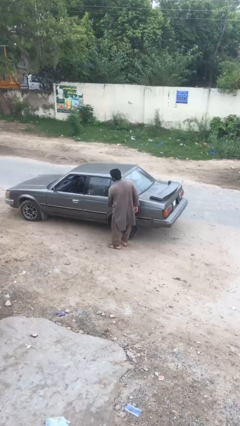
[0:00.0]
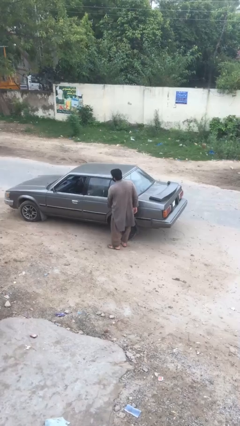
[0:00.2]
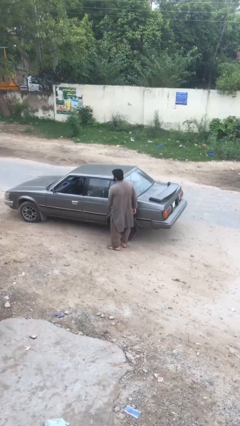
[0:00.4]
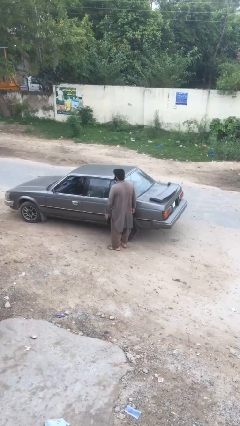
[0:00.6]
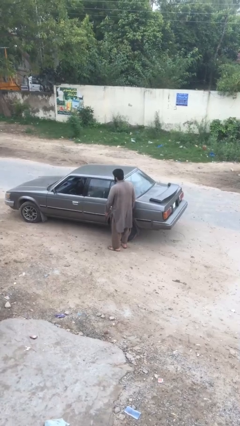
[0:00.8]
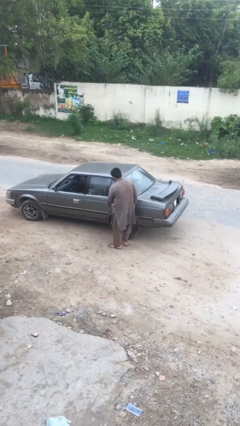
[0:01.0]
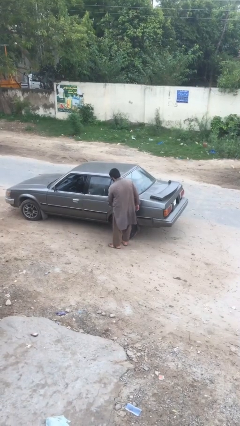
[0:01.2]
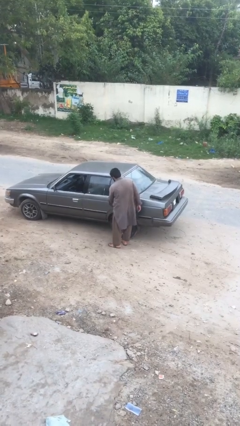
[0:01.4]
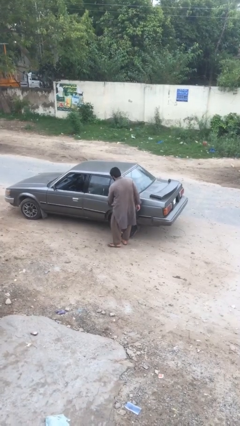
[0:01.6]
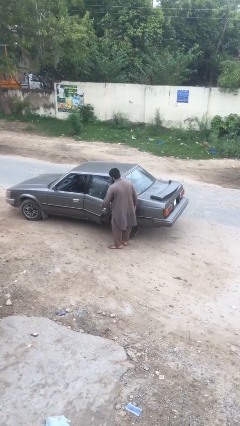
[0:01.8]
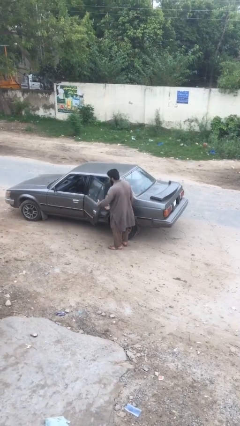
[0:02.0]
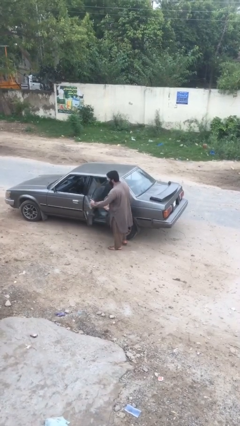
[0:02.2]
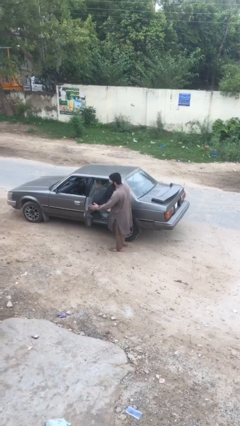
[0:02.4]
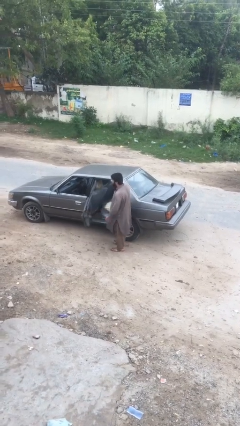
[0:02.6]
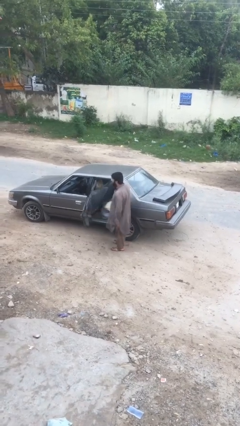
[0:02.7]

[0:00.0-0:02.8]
person opens car door

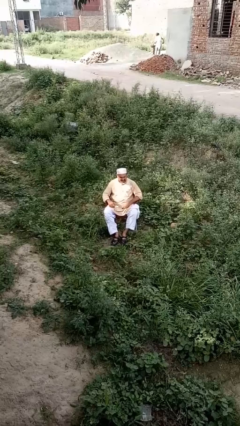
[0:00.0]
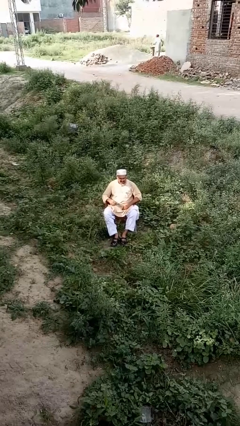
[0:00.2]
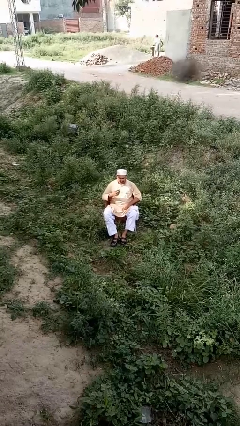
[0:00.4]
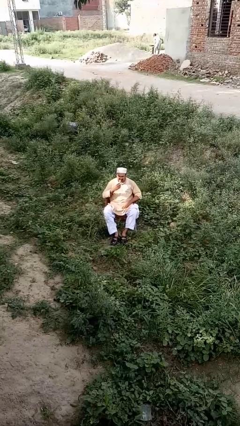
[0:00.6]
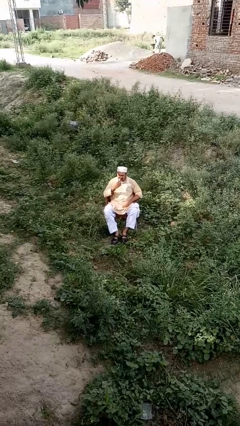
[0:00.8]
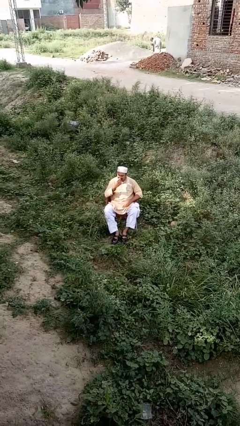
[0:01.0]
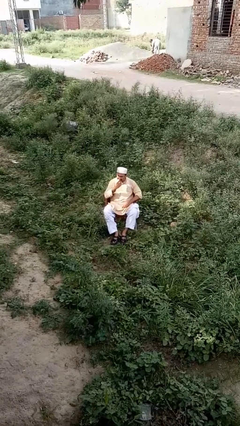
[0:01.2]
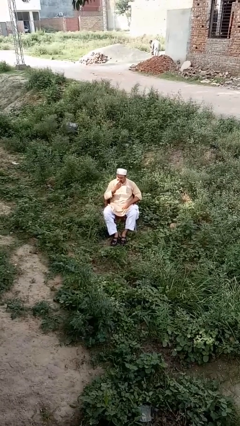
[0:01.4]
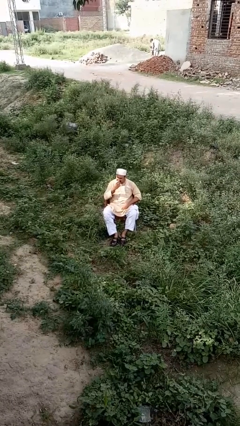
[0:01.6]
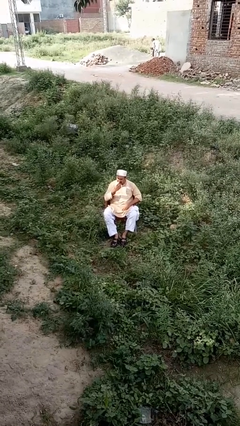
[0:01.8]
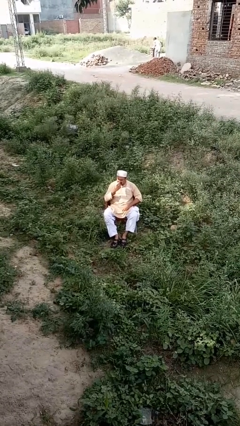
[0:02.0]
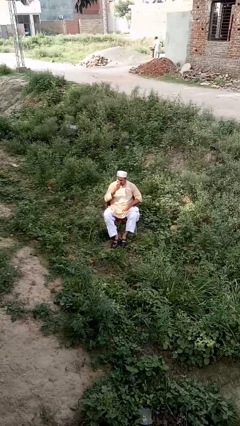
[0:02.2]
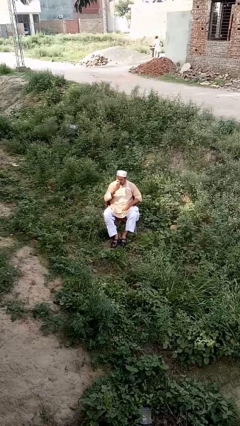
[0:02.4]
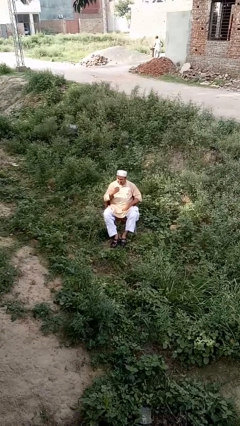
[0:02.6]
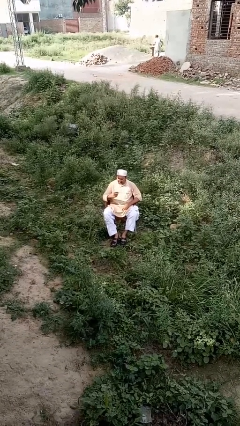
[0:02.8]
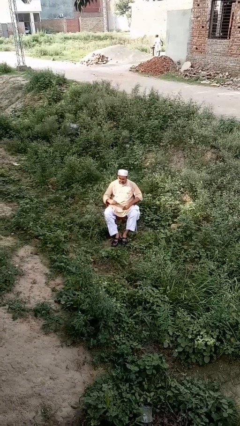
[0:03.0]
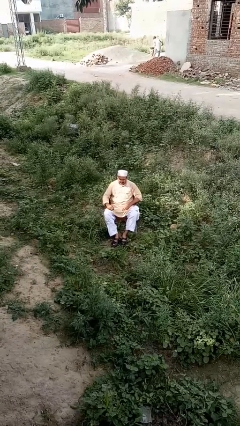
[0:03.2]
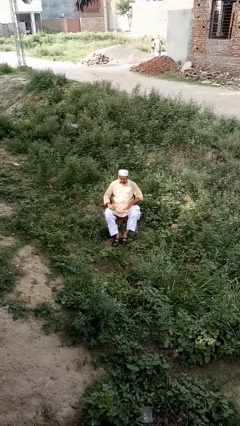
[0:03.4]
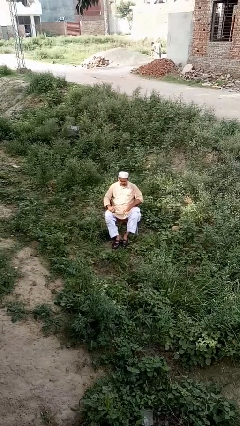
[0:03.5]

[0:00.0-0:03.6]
person brushes teeth

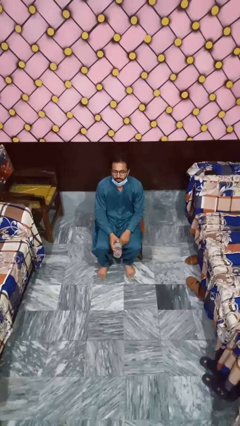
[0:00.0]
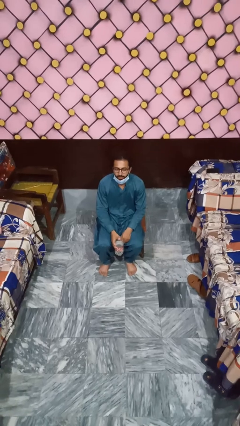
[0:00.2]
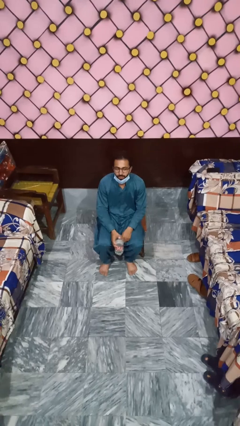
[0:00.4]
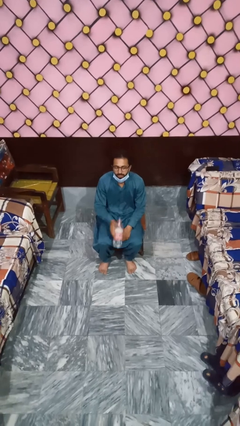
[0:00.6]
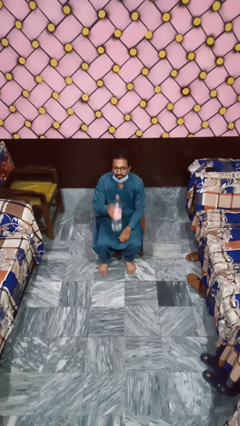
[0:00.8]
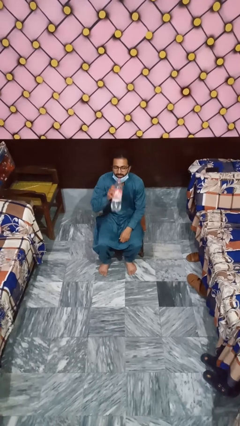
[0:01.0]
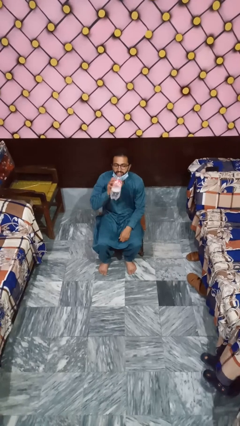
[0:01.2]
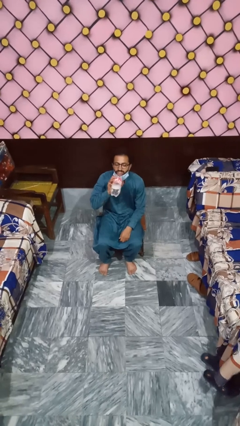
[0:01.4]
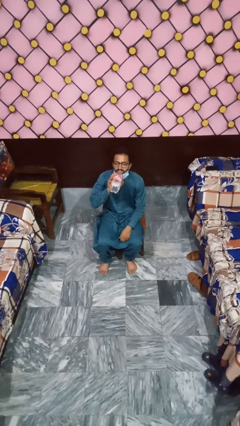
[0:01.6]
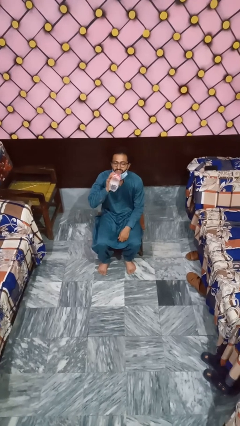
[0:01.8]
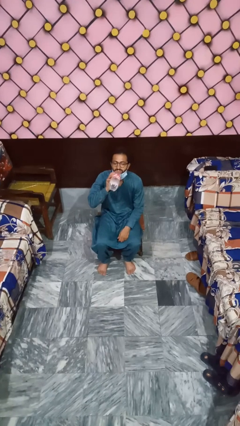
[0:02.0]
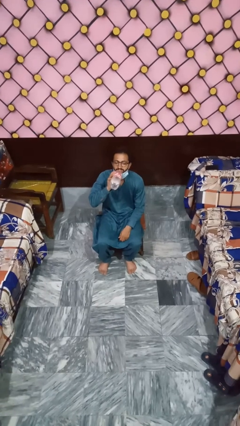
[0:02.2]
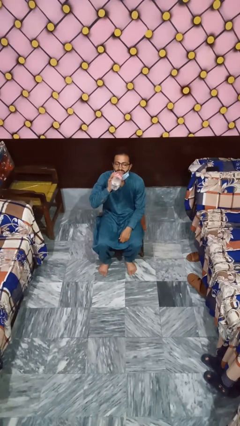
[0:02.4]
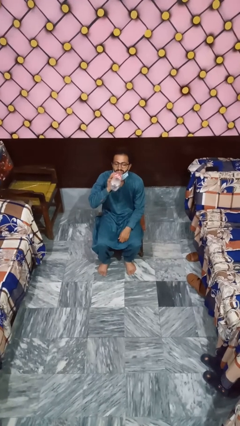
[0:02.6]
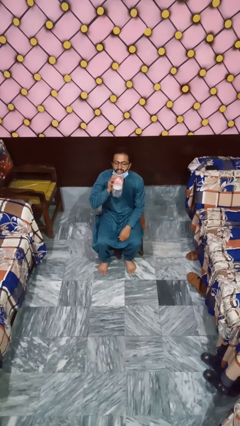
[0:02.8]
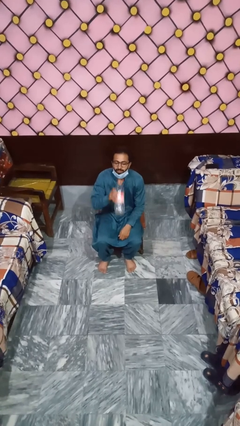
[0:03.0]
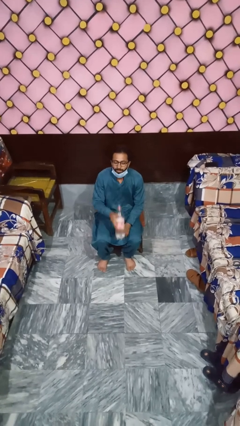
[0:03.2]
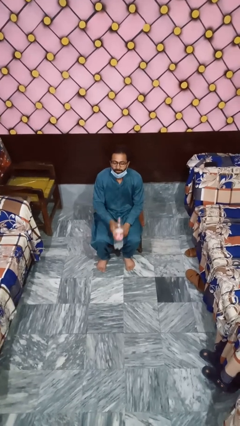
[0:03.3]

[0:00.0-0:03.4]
person drinks from bottle

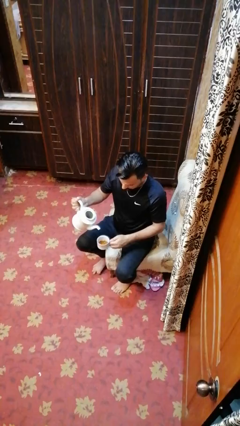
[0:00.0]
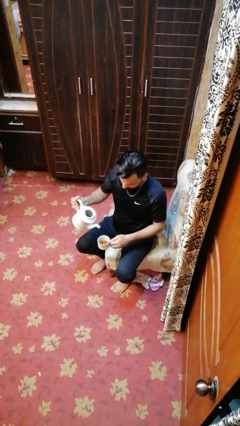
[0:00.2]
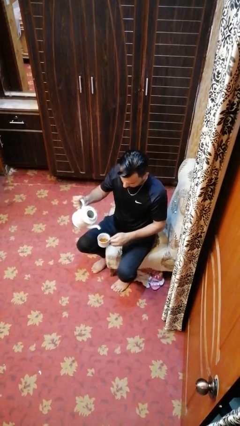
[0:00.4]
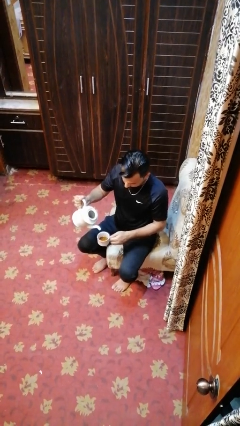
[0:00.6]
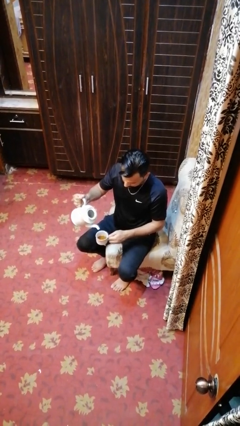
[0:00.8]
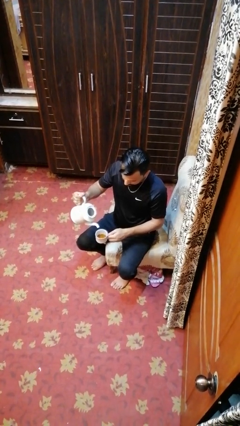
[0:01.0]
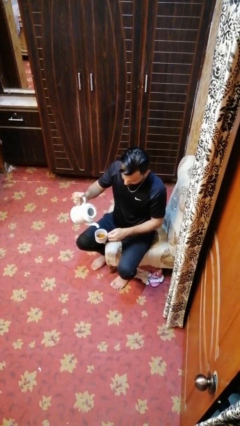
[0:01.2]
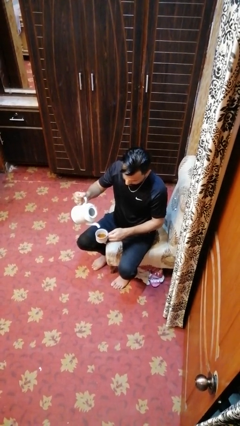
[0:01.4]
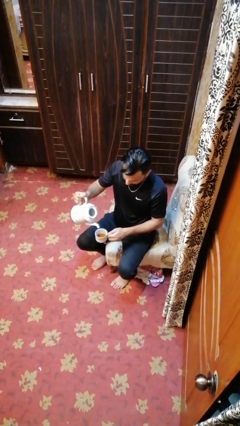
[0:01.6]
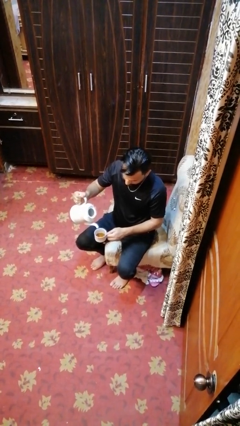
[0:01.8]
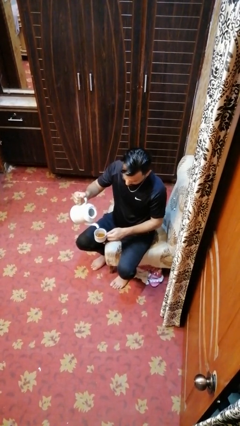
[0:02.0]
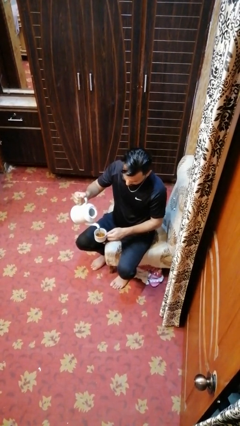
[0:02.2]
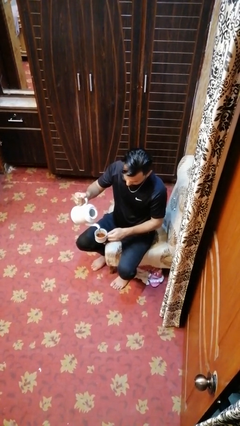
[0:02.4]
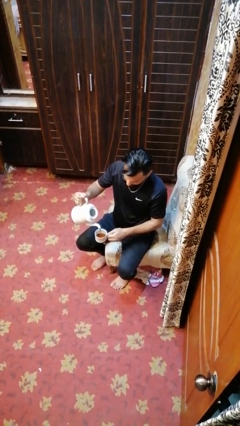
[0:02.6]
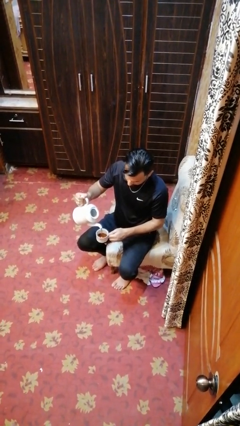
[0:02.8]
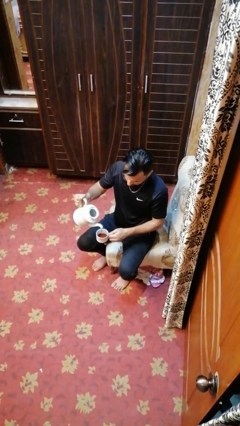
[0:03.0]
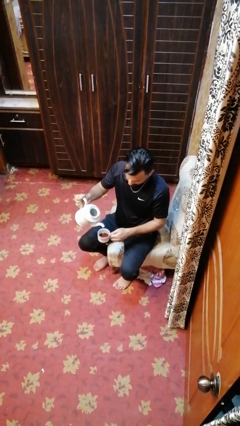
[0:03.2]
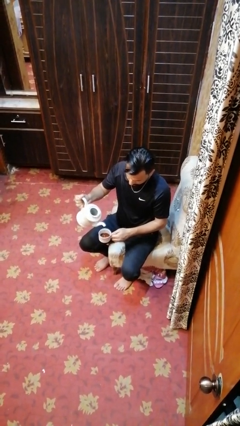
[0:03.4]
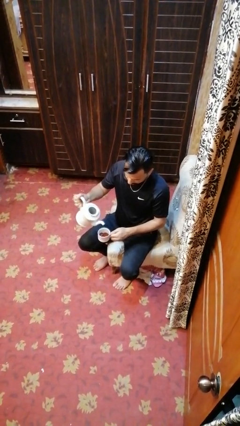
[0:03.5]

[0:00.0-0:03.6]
person pours coffee into mug

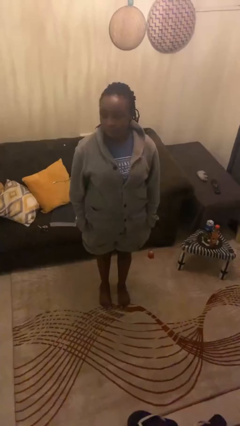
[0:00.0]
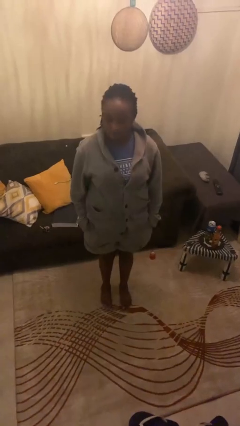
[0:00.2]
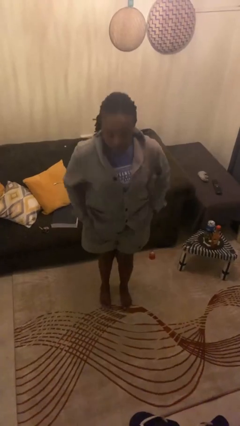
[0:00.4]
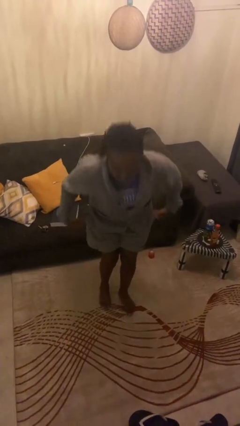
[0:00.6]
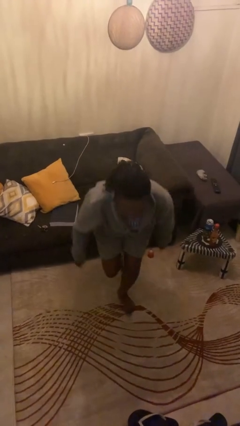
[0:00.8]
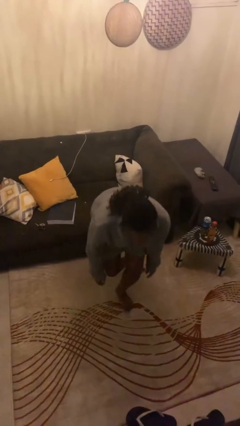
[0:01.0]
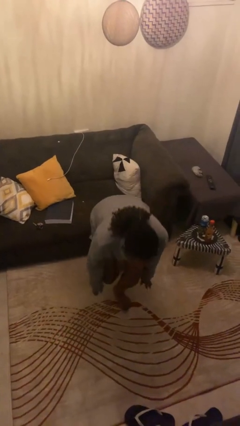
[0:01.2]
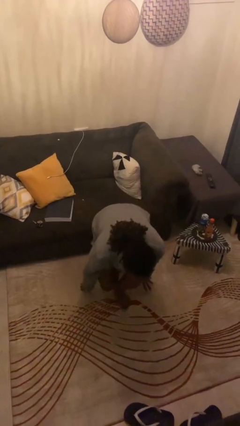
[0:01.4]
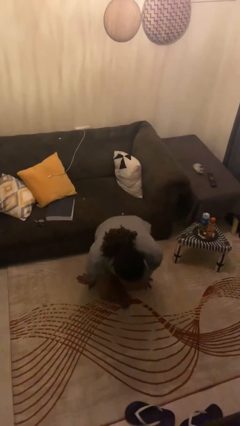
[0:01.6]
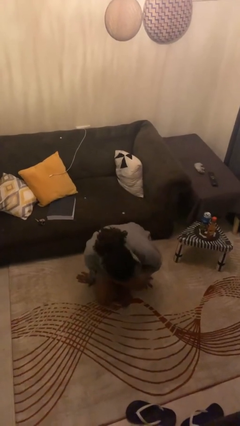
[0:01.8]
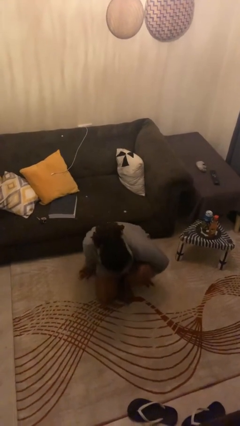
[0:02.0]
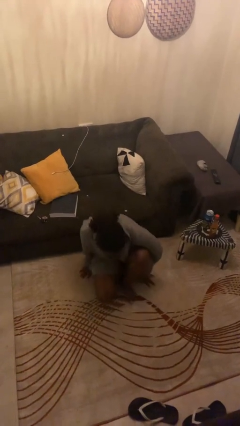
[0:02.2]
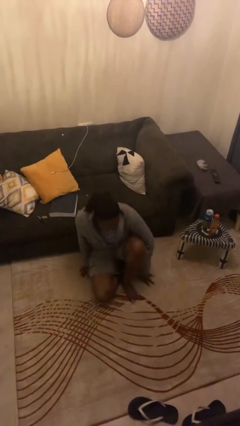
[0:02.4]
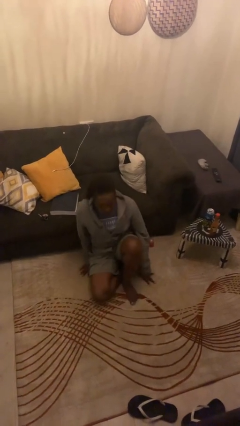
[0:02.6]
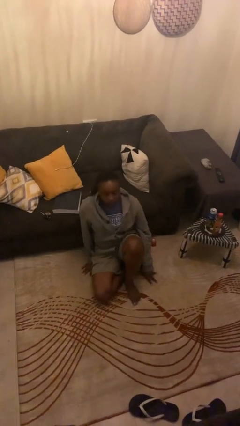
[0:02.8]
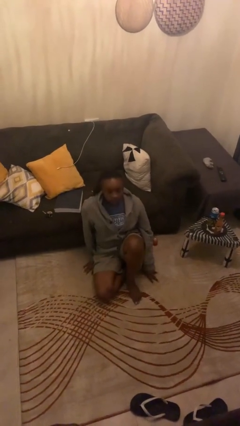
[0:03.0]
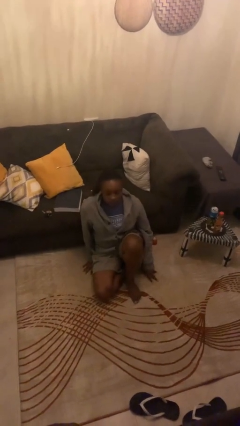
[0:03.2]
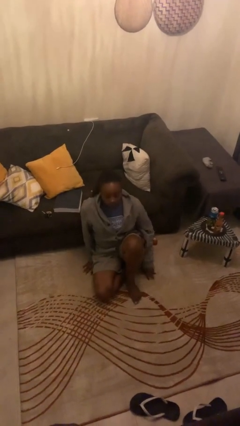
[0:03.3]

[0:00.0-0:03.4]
person sits crisscross

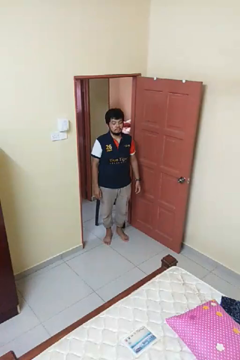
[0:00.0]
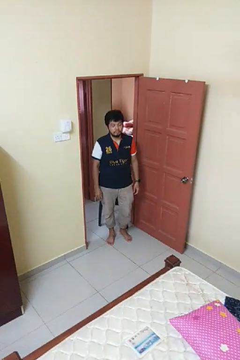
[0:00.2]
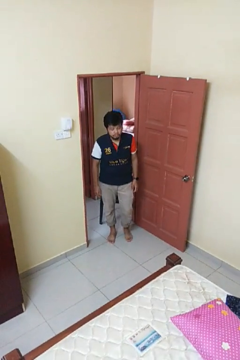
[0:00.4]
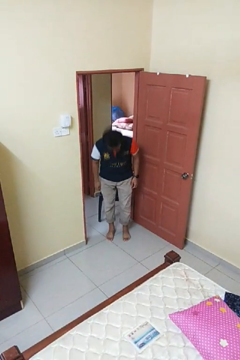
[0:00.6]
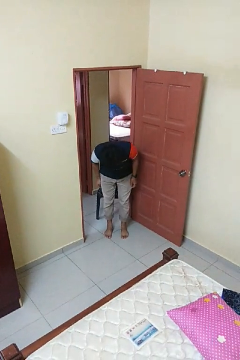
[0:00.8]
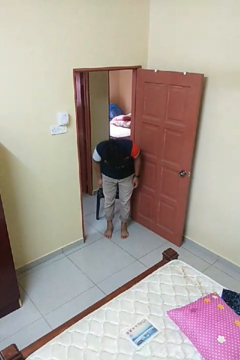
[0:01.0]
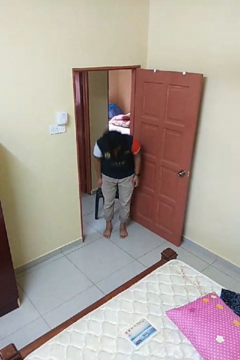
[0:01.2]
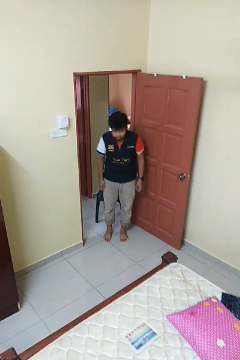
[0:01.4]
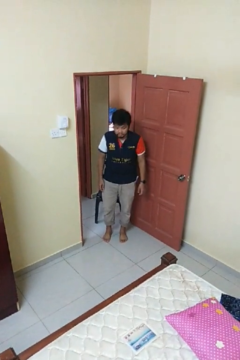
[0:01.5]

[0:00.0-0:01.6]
person bows
